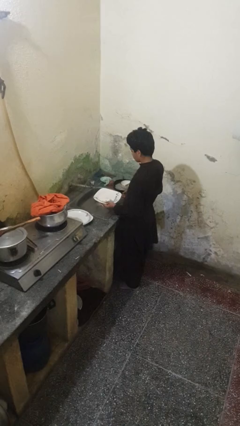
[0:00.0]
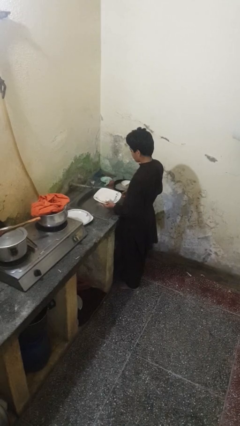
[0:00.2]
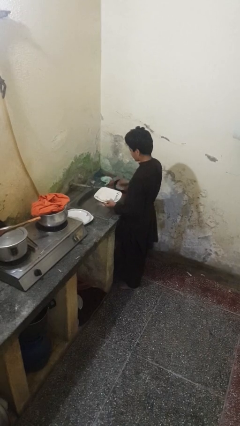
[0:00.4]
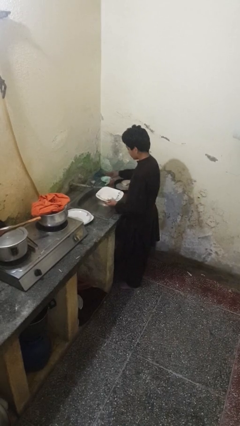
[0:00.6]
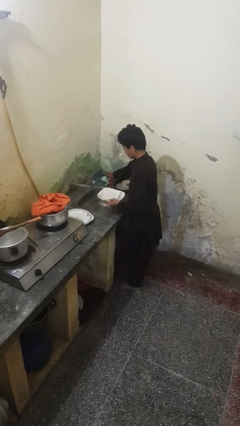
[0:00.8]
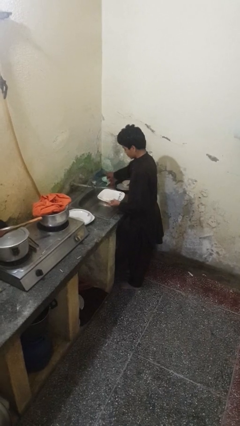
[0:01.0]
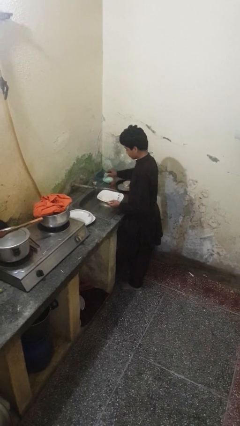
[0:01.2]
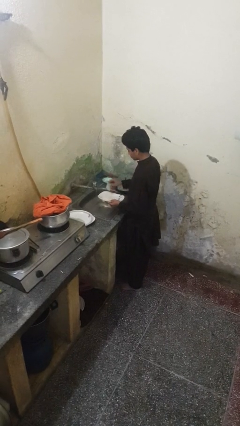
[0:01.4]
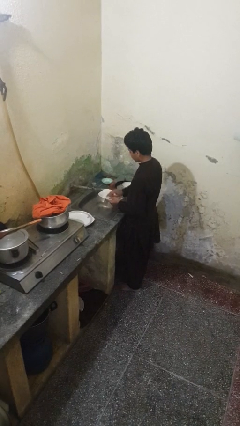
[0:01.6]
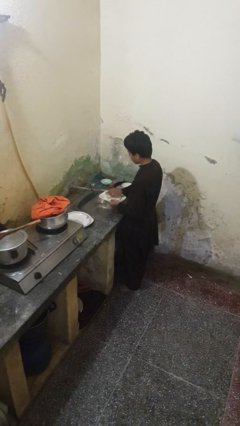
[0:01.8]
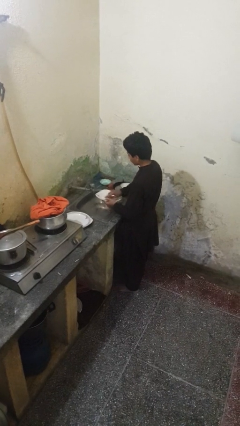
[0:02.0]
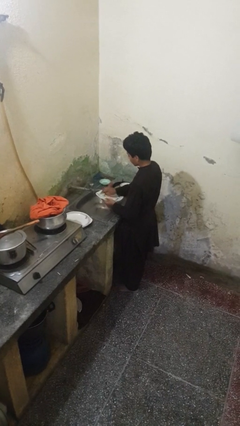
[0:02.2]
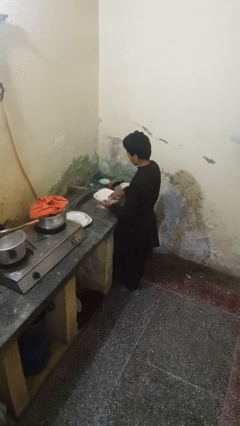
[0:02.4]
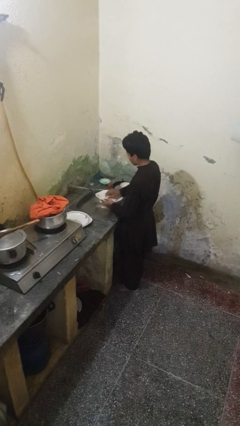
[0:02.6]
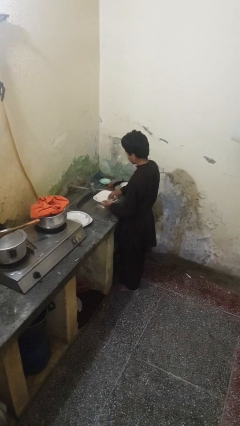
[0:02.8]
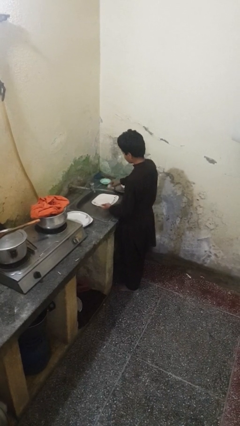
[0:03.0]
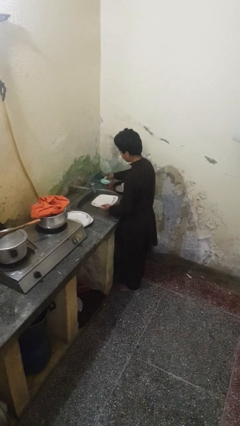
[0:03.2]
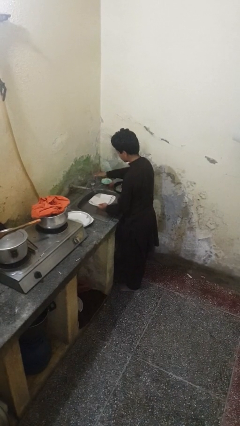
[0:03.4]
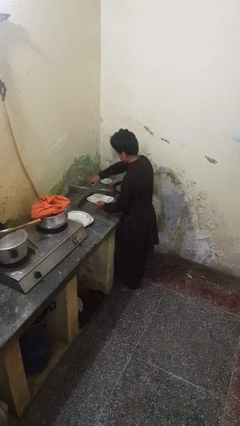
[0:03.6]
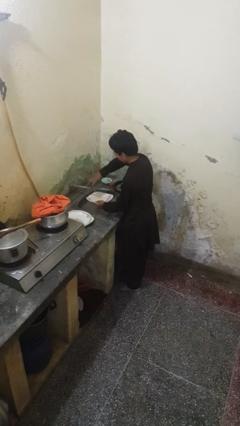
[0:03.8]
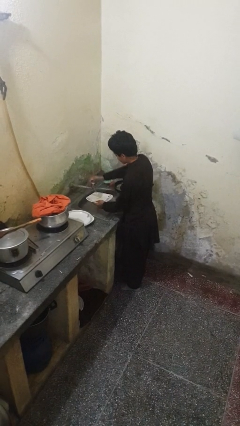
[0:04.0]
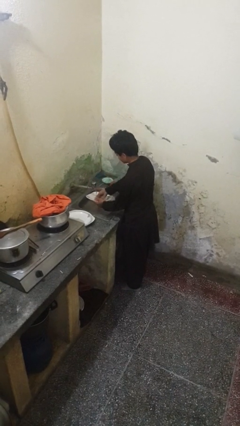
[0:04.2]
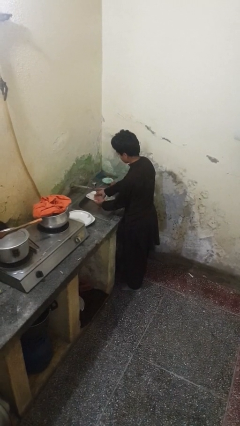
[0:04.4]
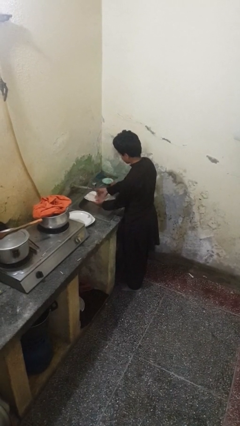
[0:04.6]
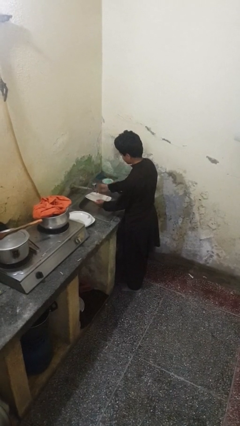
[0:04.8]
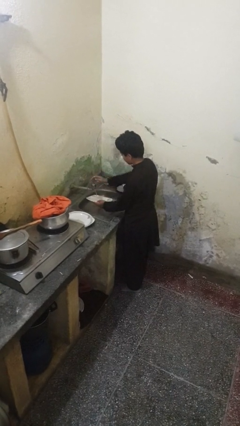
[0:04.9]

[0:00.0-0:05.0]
person washes dish

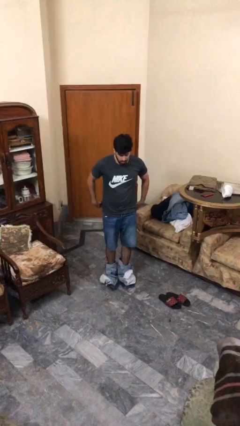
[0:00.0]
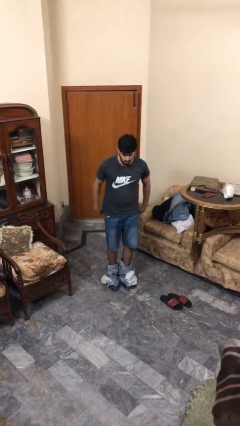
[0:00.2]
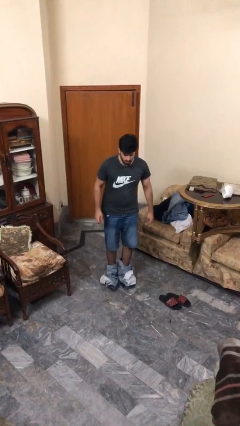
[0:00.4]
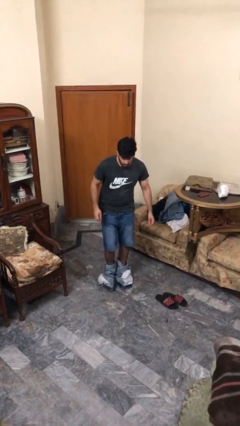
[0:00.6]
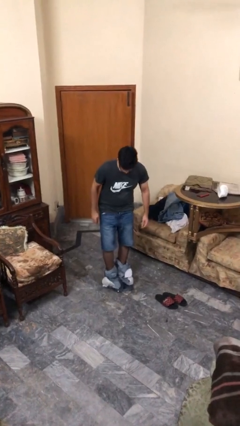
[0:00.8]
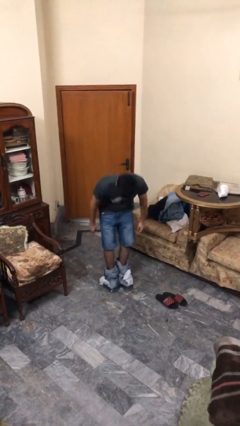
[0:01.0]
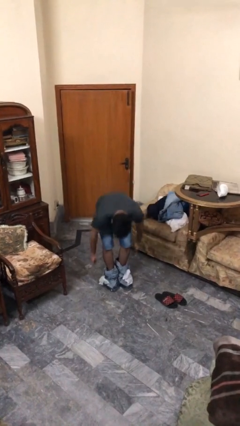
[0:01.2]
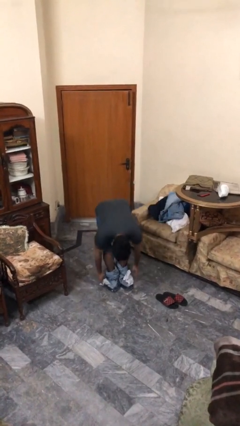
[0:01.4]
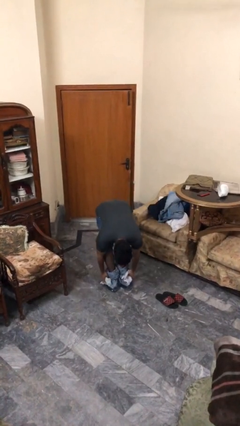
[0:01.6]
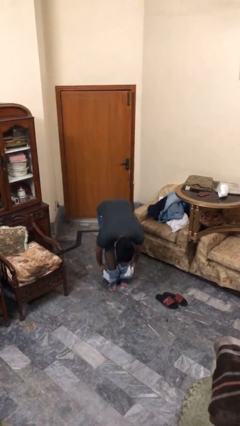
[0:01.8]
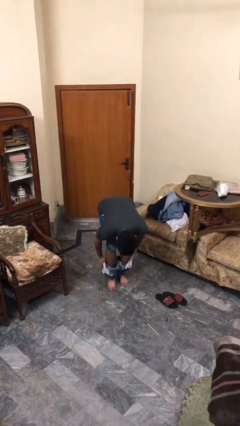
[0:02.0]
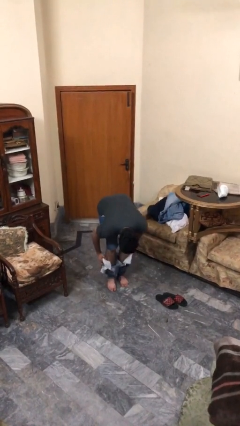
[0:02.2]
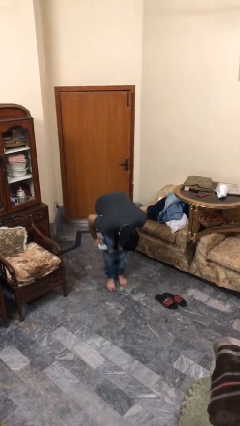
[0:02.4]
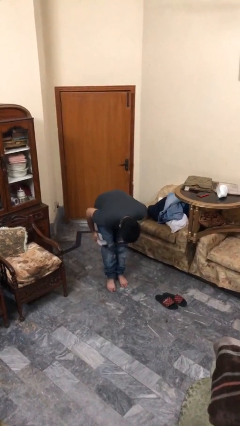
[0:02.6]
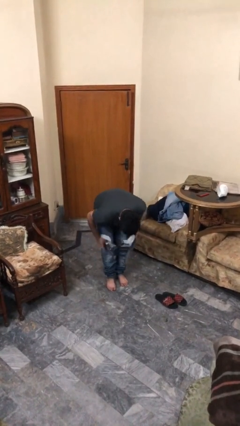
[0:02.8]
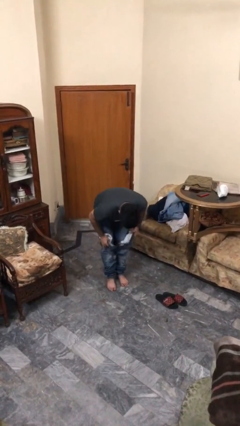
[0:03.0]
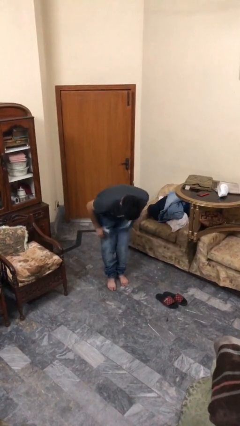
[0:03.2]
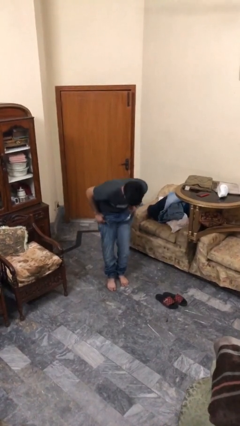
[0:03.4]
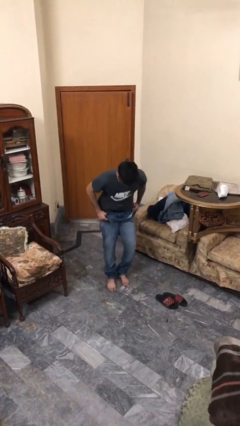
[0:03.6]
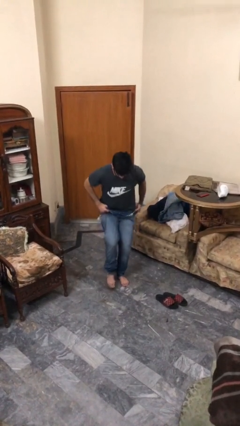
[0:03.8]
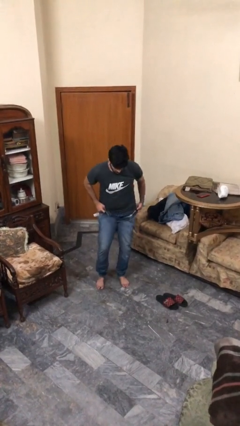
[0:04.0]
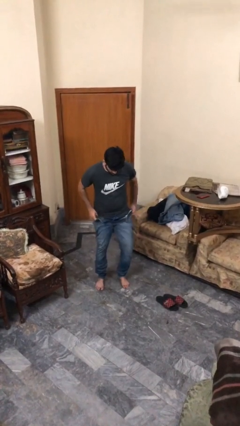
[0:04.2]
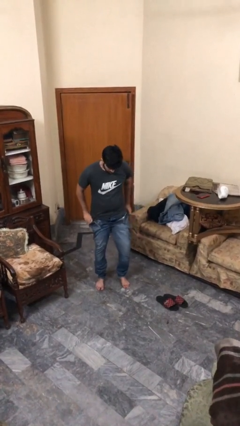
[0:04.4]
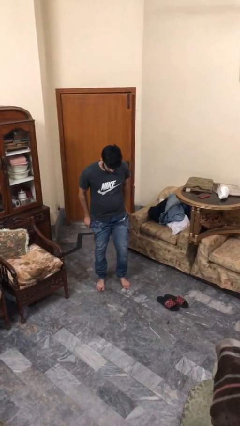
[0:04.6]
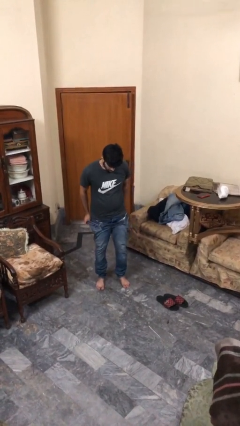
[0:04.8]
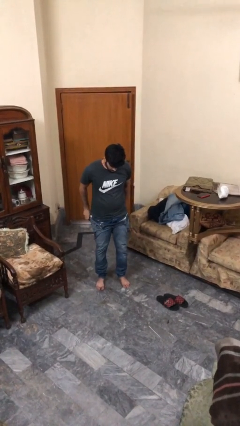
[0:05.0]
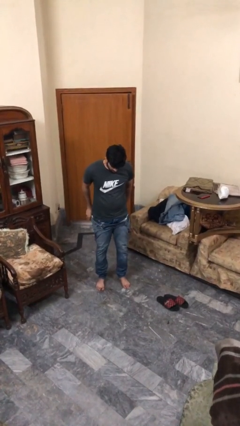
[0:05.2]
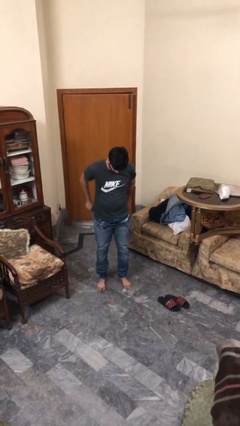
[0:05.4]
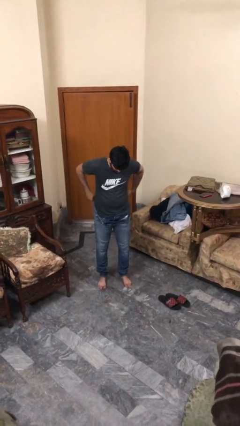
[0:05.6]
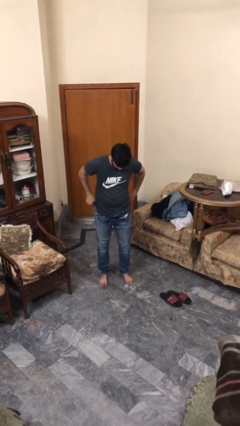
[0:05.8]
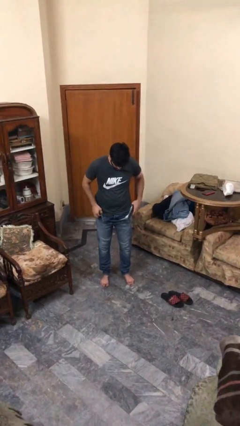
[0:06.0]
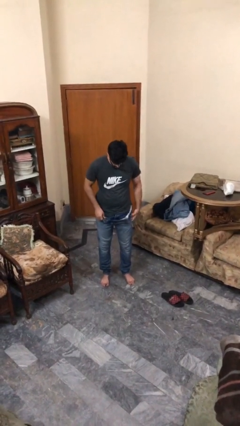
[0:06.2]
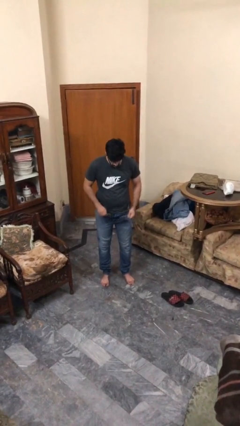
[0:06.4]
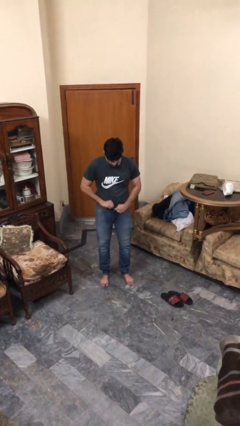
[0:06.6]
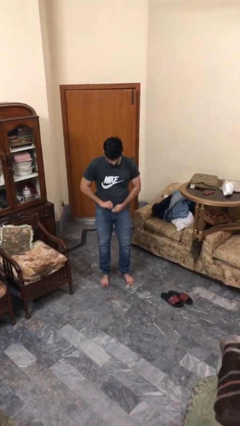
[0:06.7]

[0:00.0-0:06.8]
person puts on pants

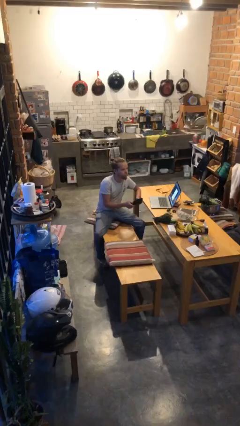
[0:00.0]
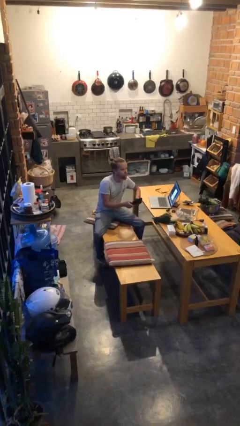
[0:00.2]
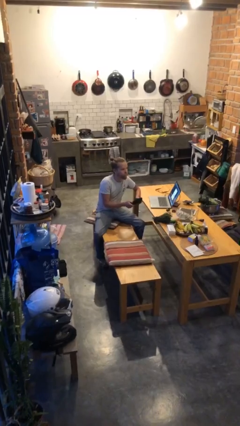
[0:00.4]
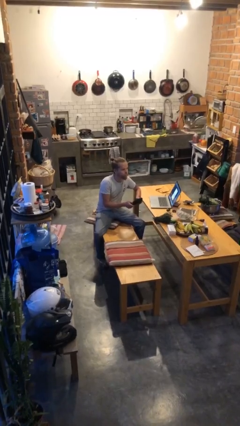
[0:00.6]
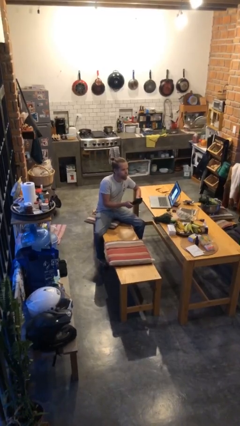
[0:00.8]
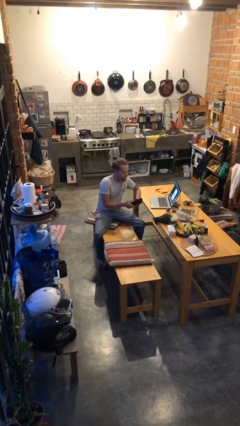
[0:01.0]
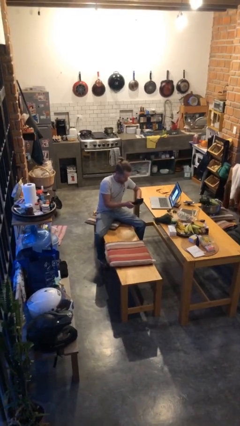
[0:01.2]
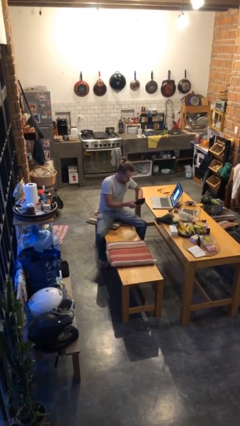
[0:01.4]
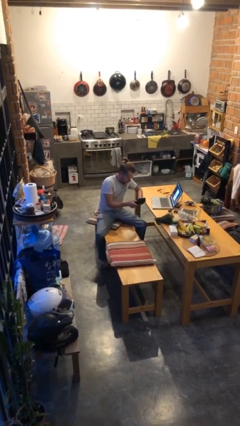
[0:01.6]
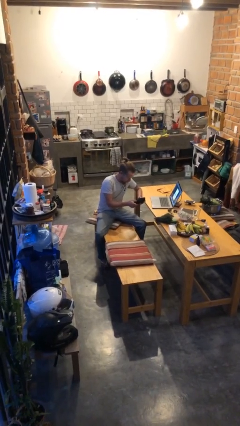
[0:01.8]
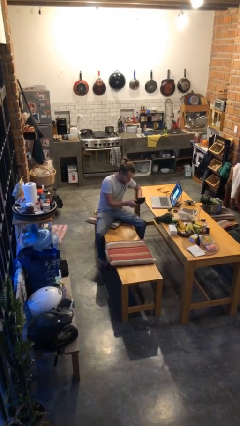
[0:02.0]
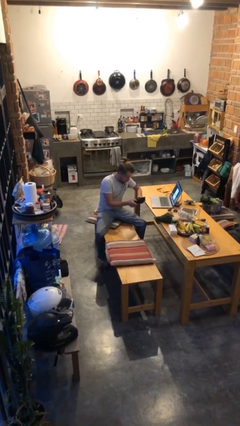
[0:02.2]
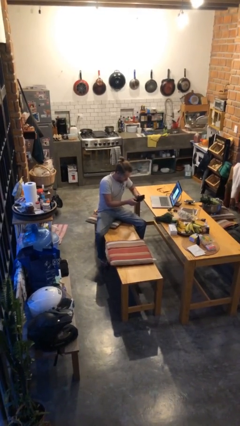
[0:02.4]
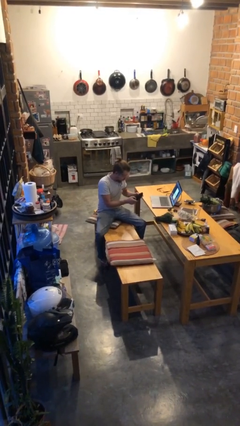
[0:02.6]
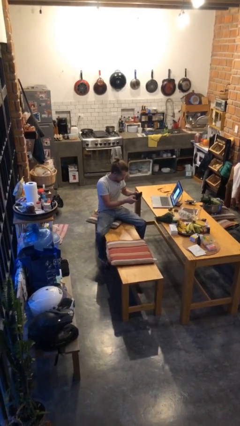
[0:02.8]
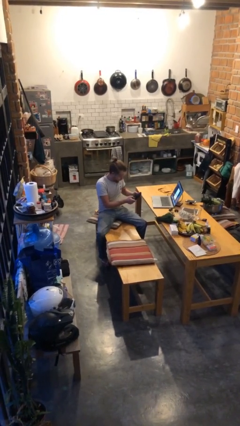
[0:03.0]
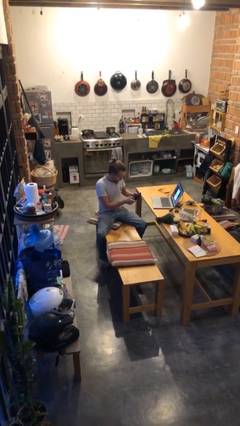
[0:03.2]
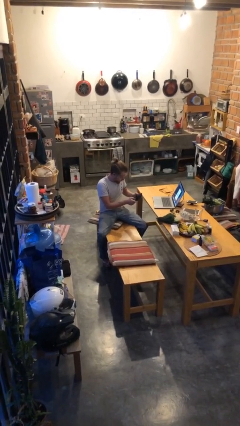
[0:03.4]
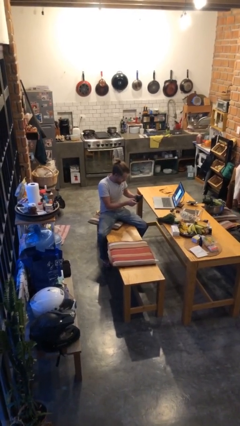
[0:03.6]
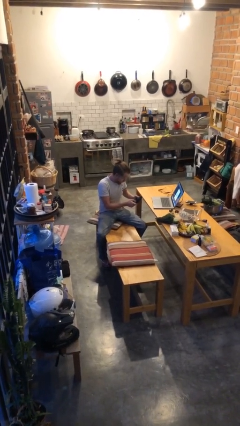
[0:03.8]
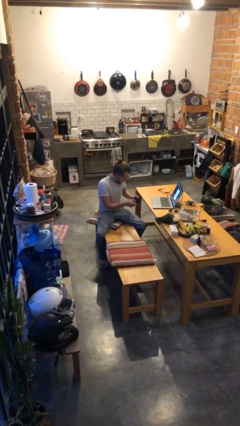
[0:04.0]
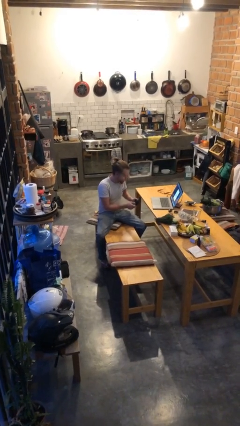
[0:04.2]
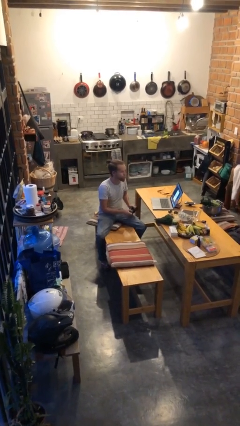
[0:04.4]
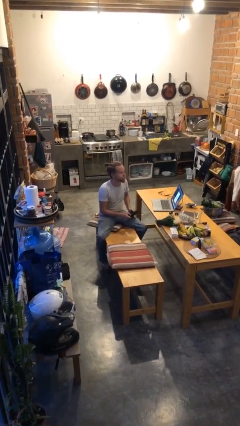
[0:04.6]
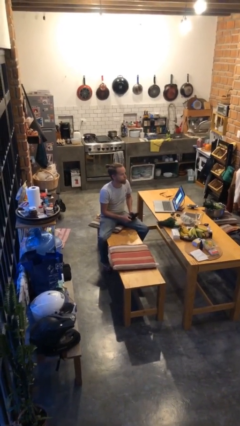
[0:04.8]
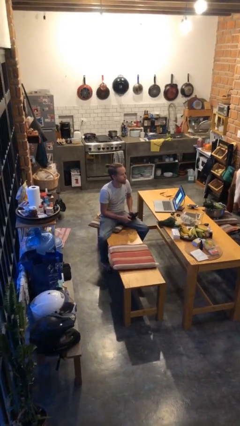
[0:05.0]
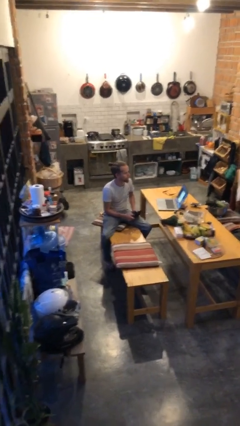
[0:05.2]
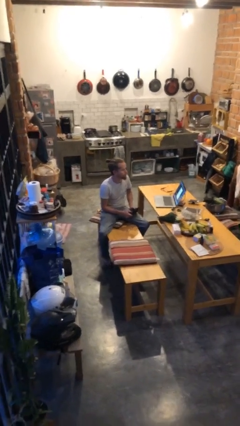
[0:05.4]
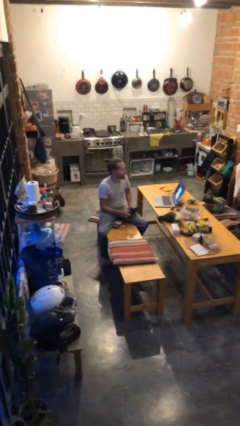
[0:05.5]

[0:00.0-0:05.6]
person interacts with handheld game

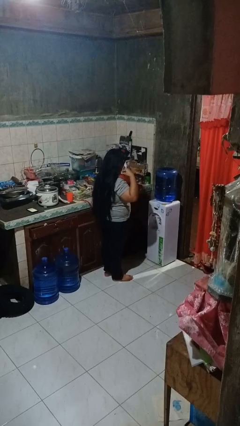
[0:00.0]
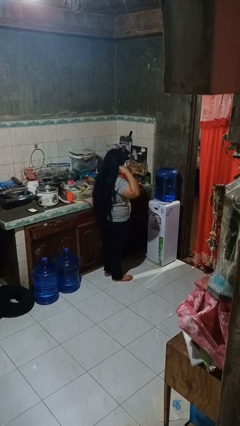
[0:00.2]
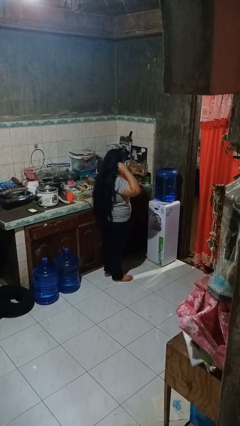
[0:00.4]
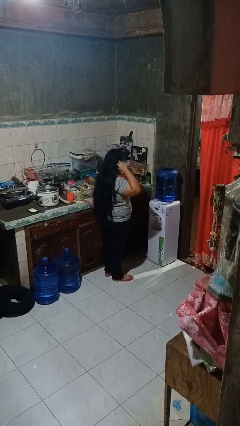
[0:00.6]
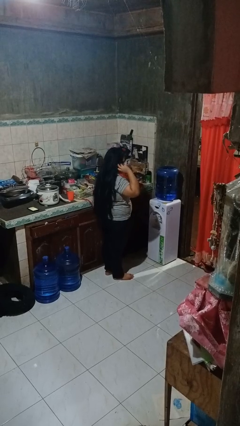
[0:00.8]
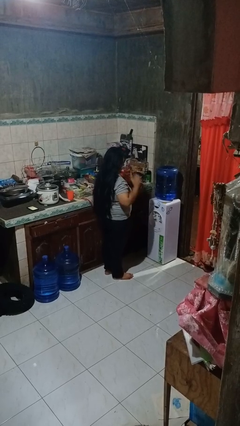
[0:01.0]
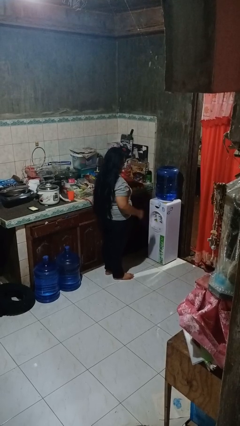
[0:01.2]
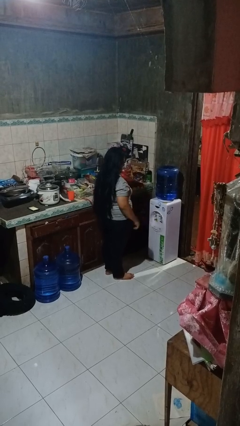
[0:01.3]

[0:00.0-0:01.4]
person puts on facemask
